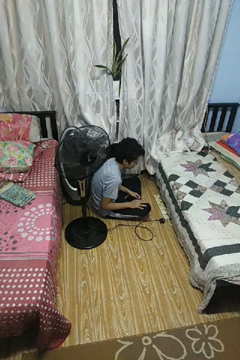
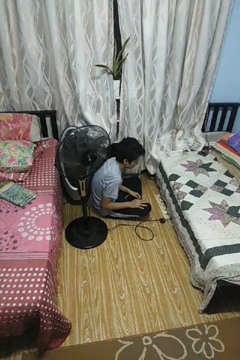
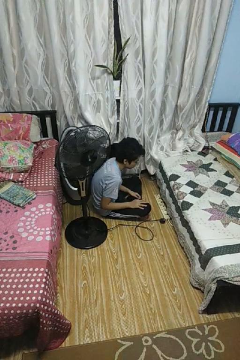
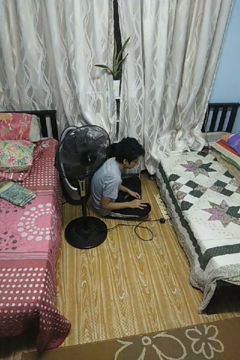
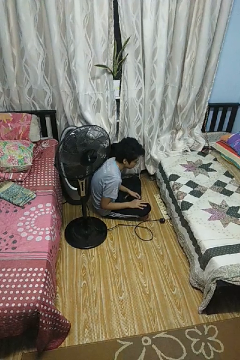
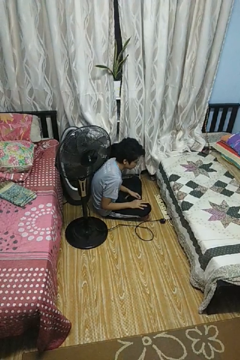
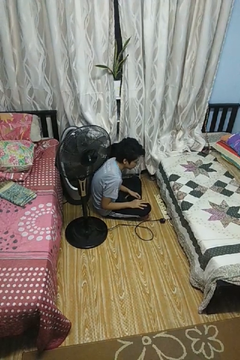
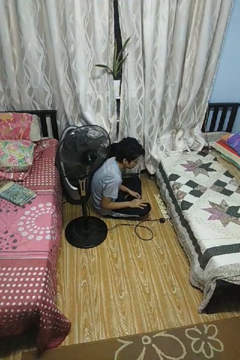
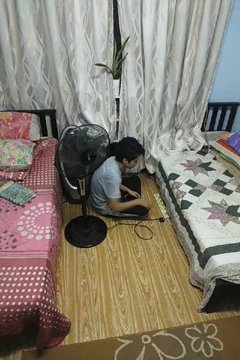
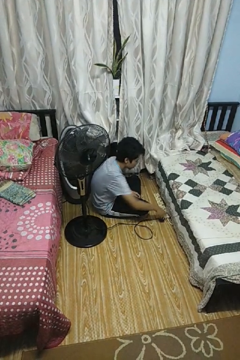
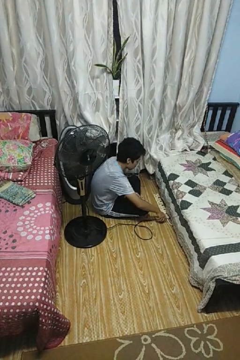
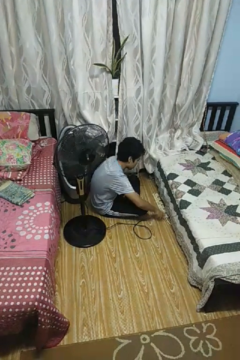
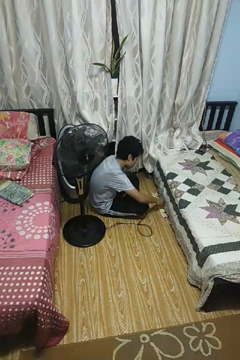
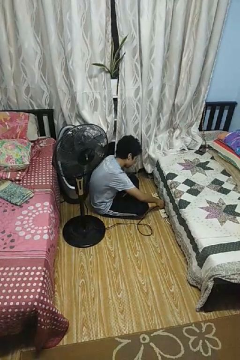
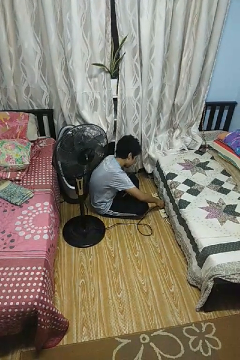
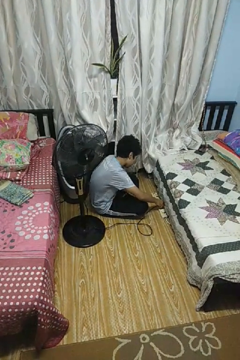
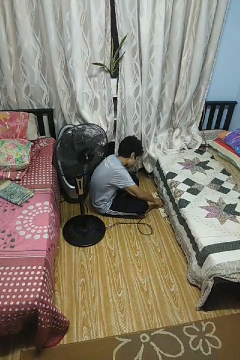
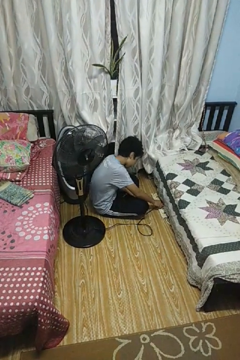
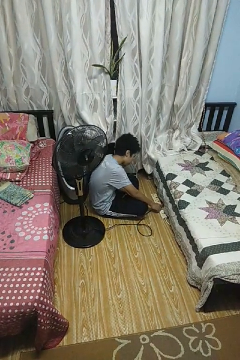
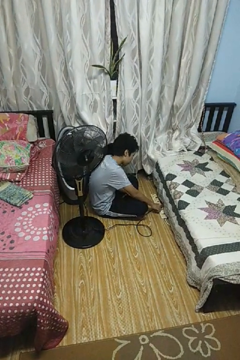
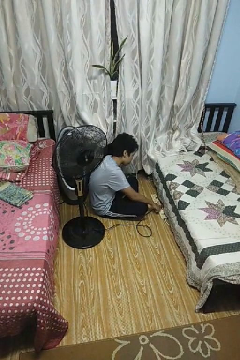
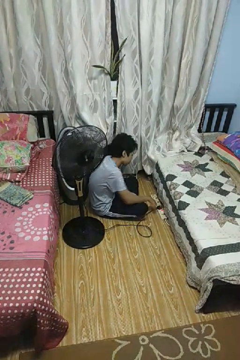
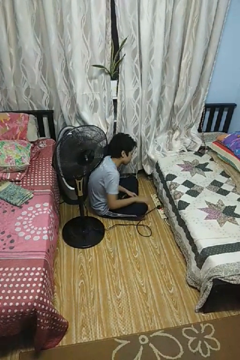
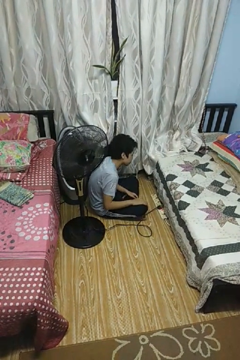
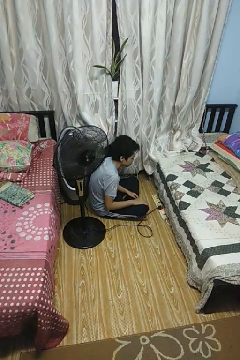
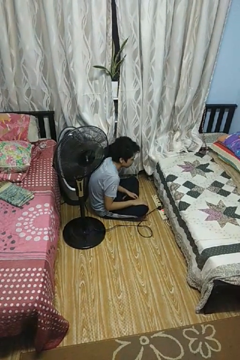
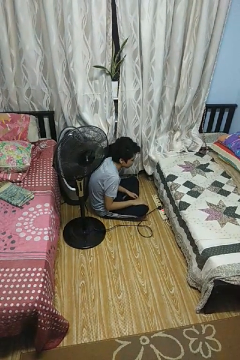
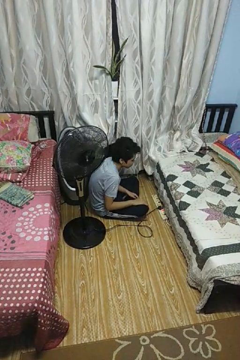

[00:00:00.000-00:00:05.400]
person plugs into electrical socket

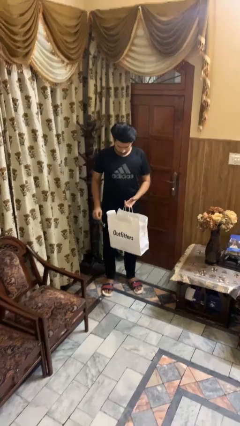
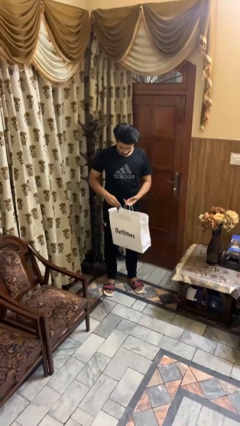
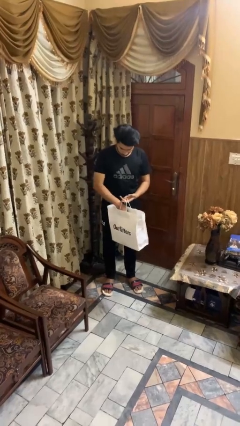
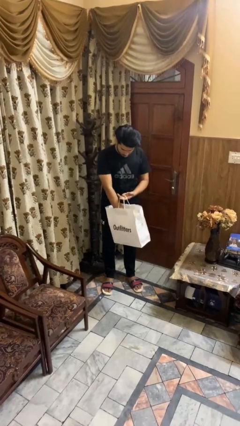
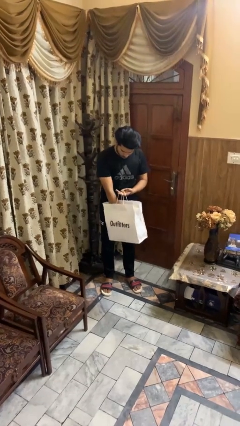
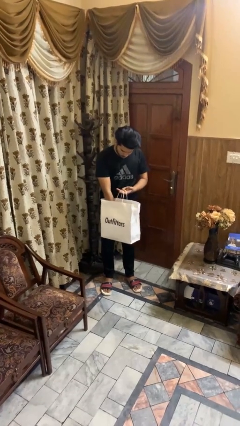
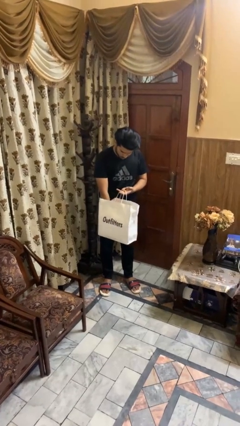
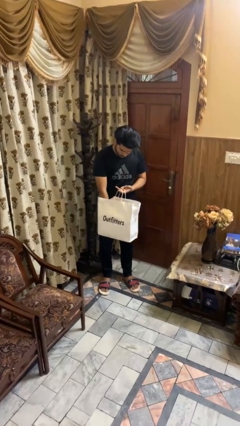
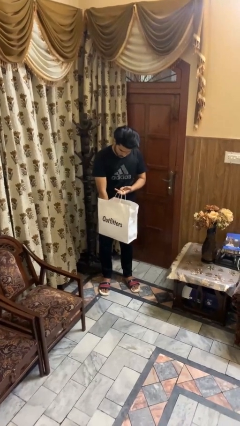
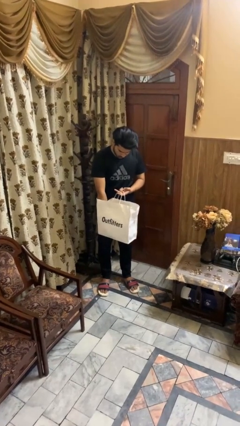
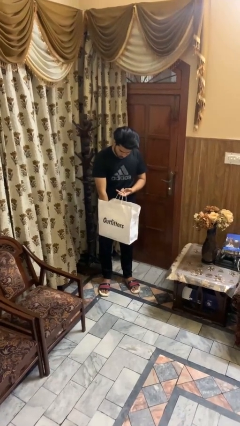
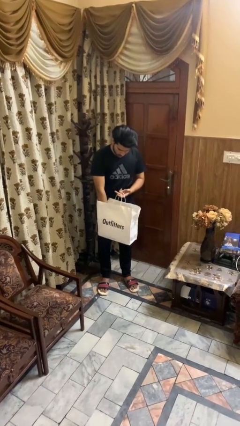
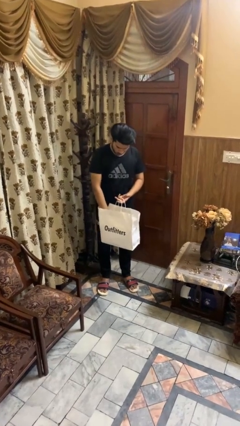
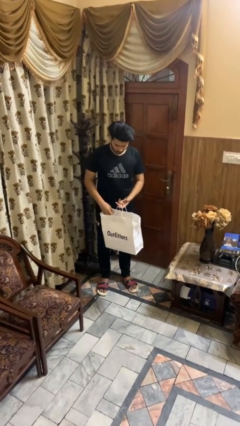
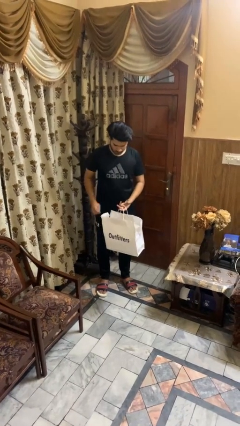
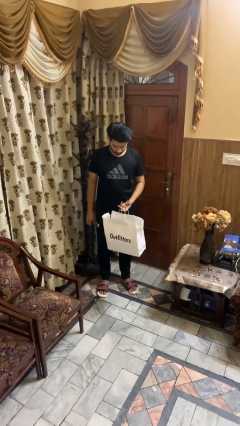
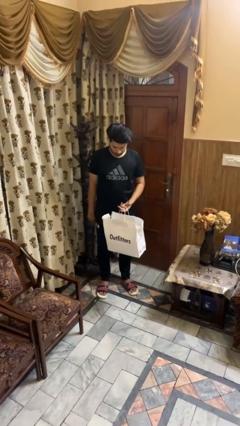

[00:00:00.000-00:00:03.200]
person searches in bag

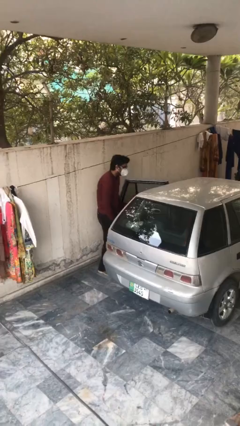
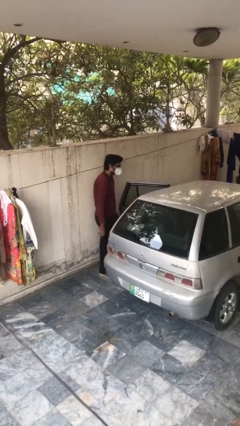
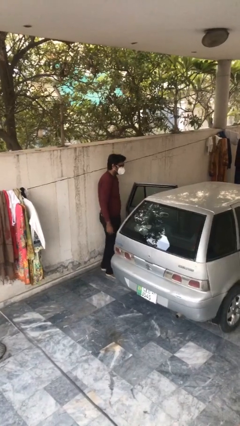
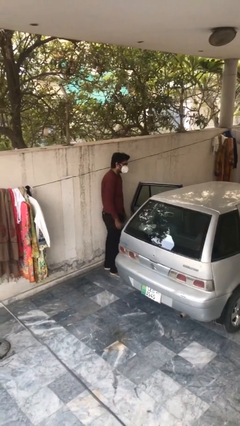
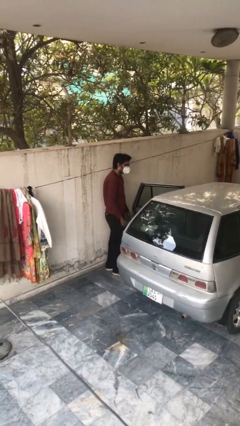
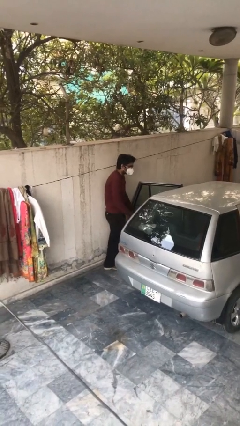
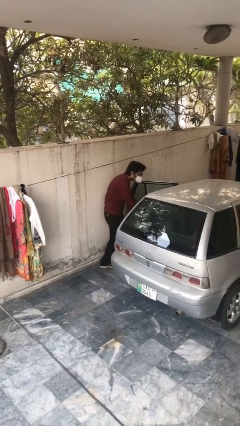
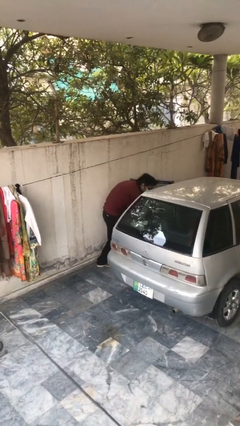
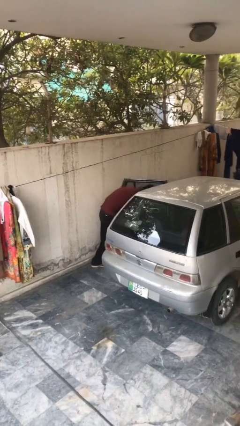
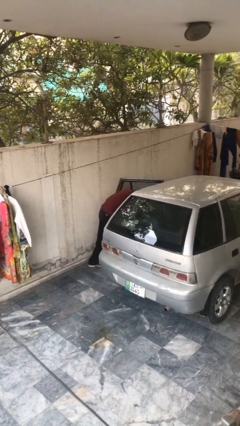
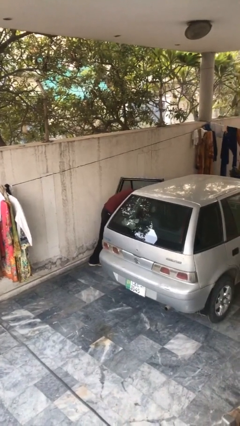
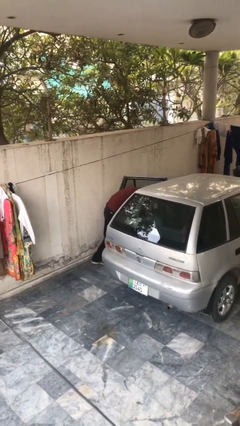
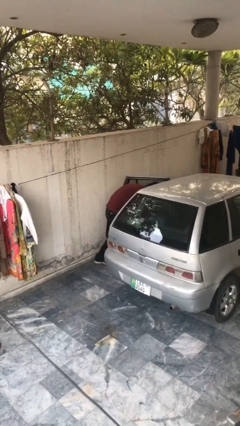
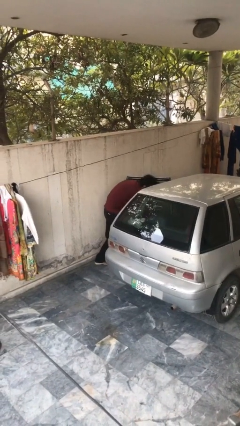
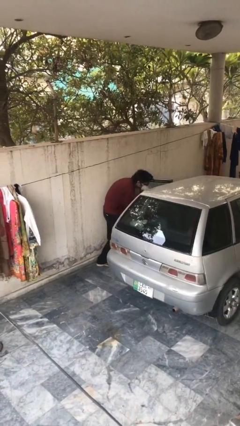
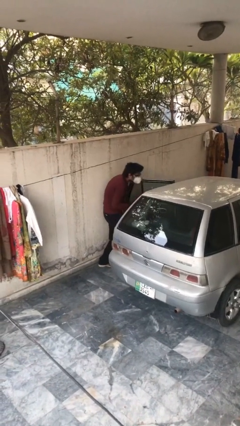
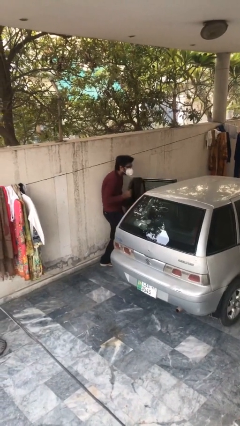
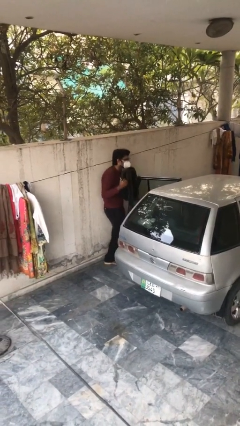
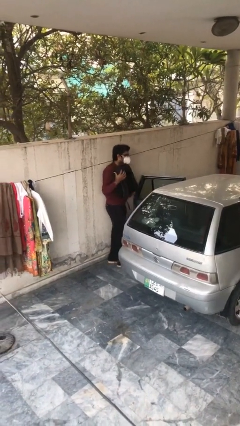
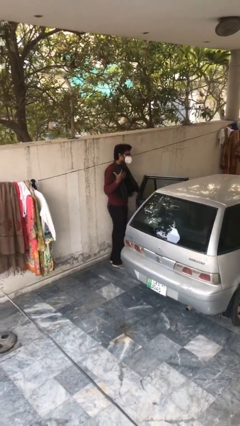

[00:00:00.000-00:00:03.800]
person unloads car

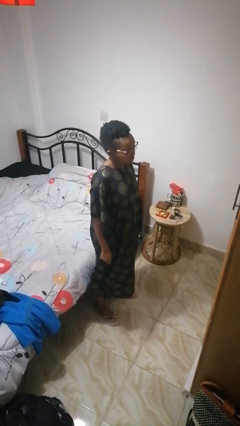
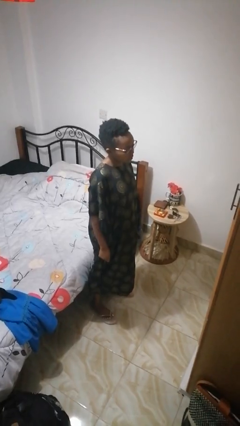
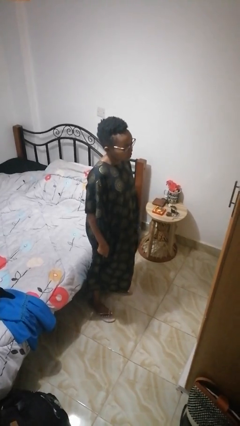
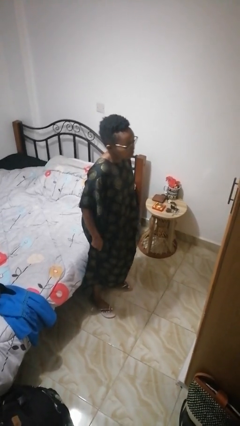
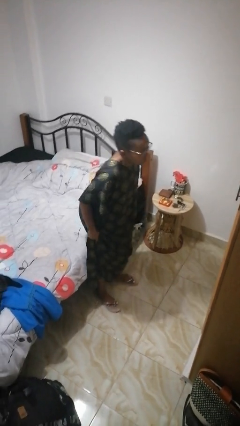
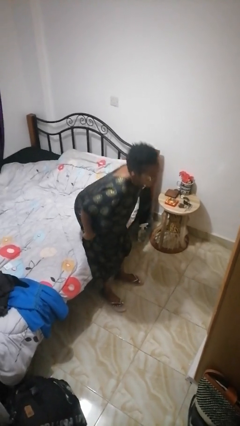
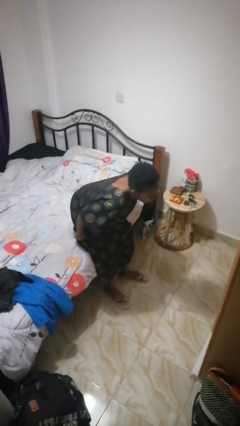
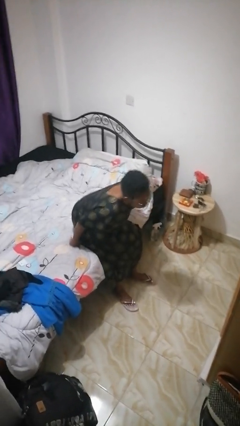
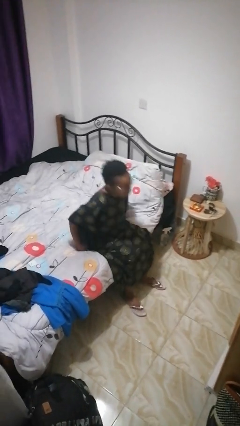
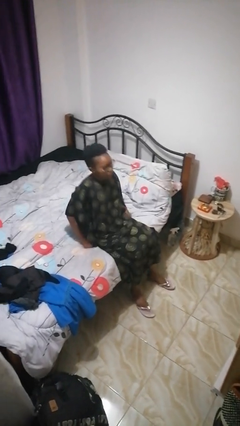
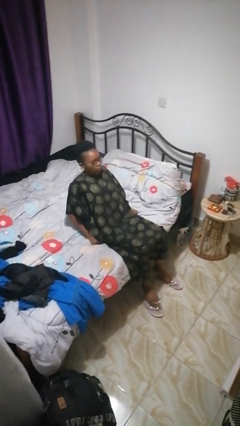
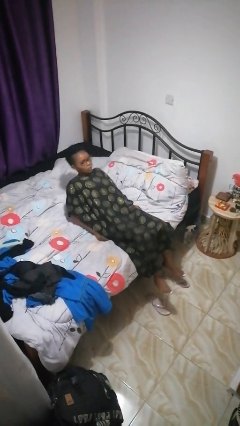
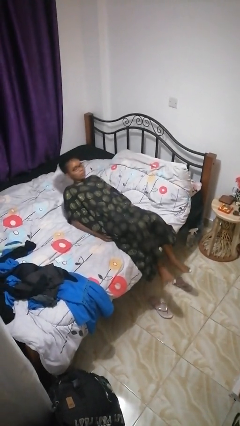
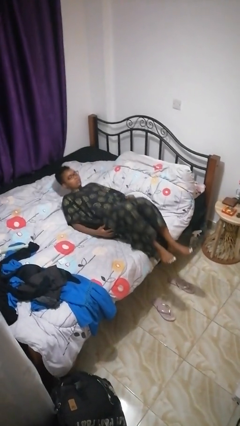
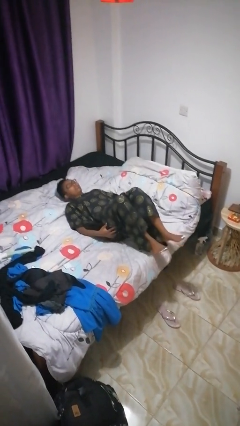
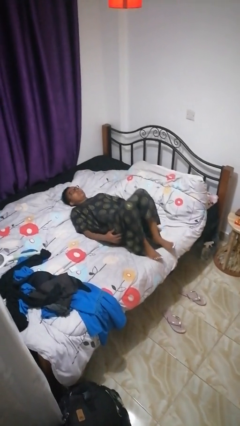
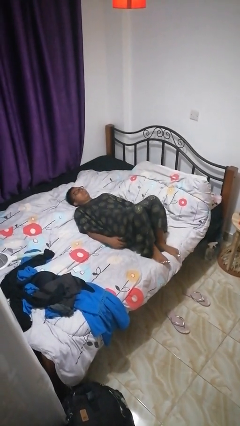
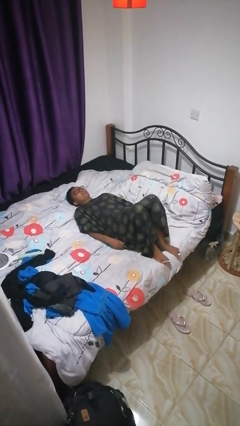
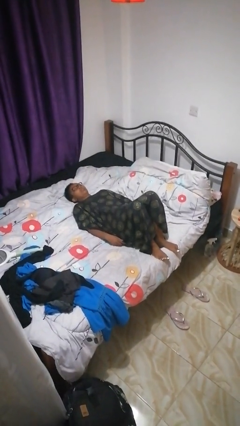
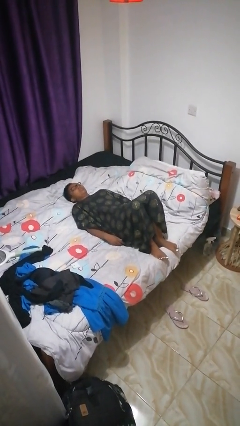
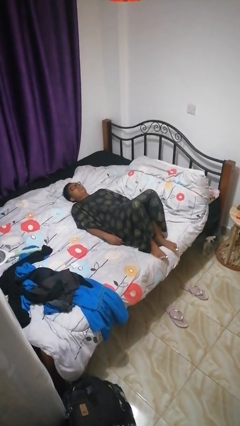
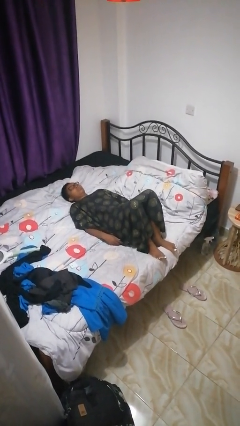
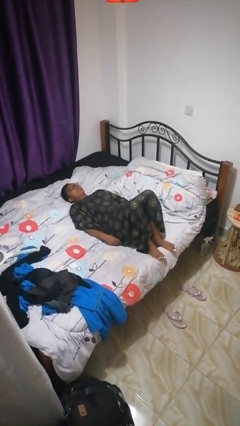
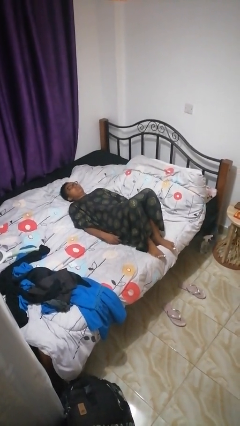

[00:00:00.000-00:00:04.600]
person lies down on bed

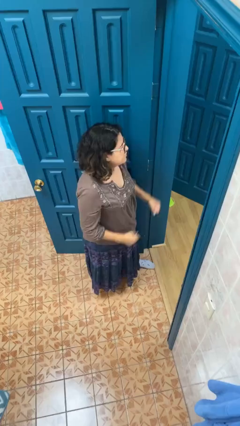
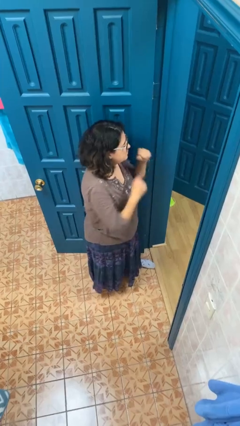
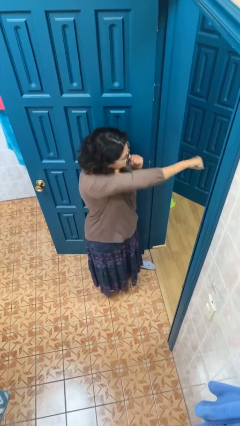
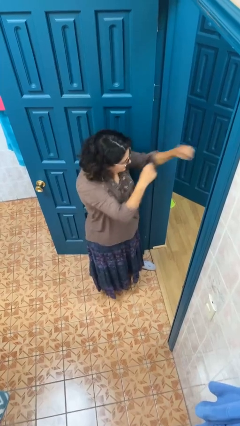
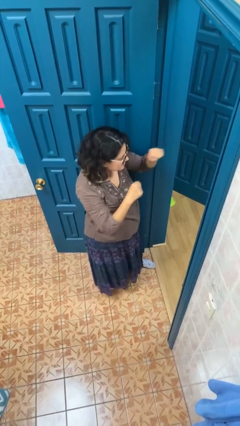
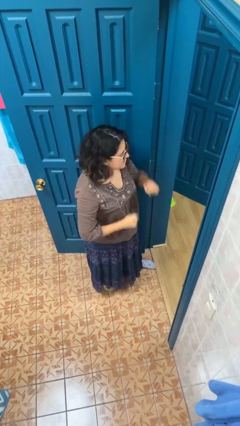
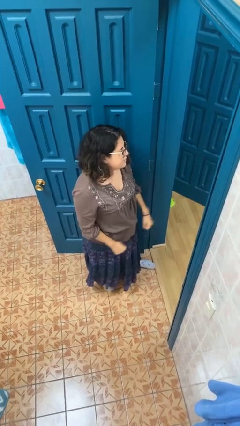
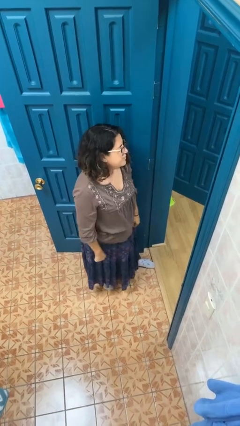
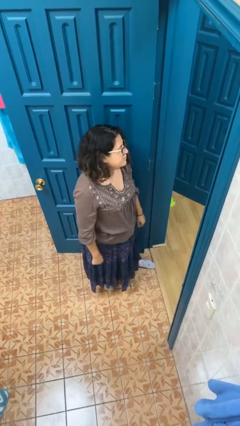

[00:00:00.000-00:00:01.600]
person punches

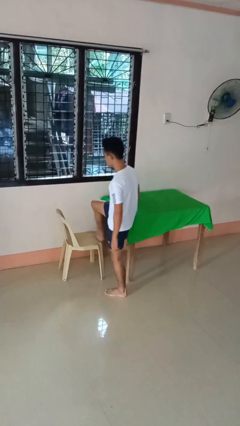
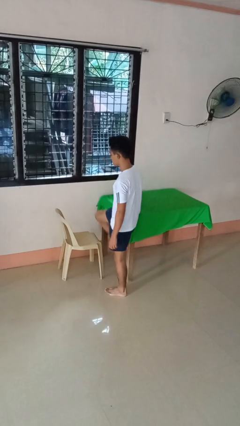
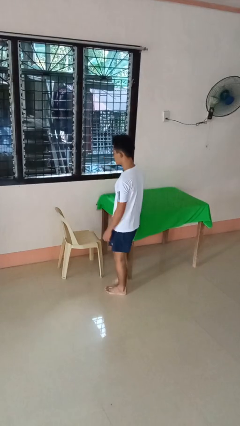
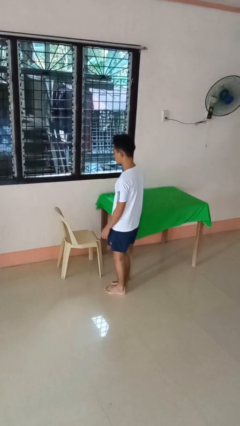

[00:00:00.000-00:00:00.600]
person climbs off chair
